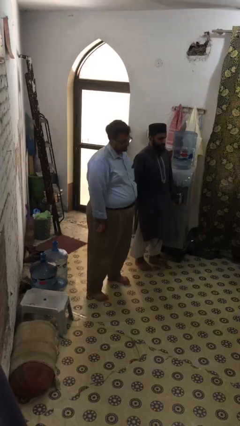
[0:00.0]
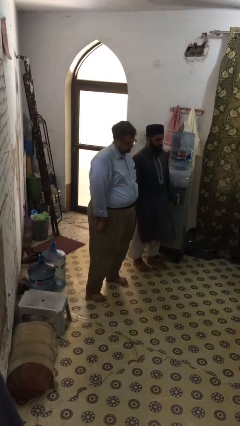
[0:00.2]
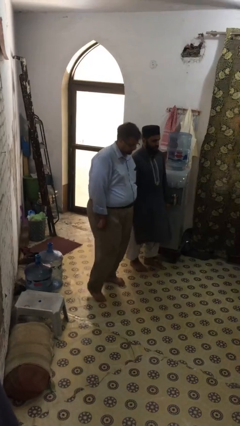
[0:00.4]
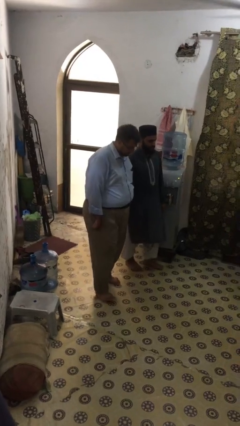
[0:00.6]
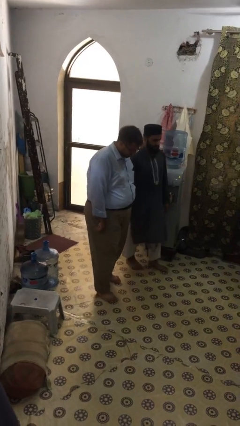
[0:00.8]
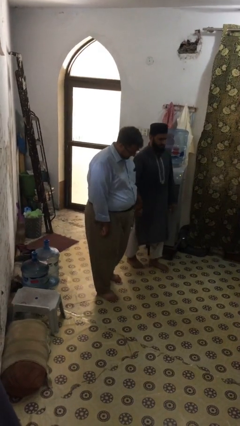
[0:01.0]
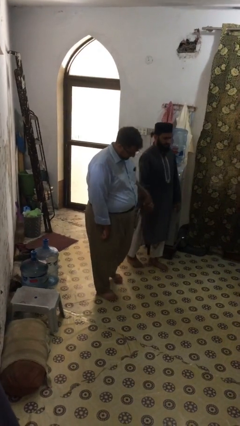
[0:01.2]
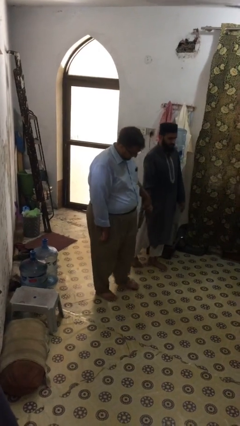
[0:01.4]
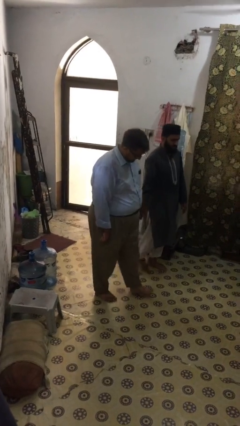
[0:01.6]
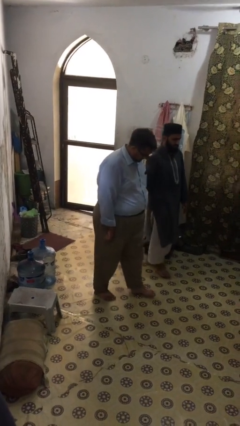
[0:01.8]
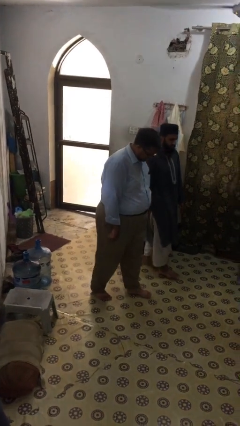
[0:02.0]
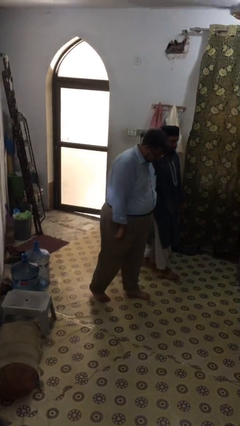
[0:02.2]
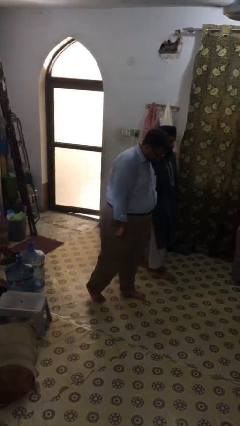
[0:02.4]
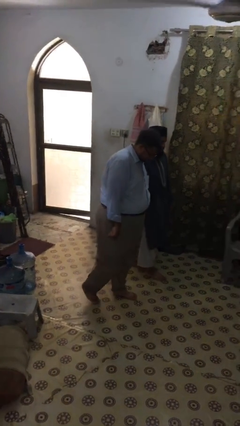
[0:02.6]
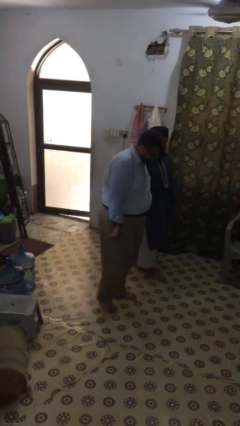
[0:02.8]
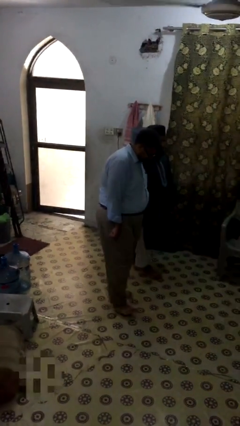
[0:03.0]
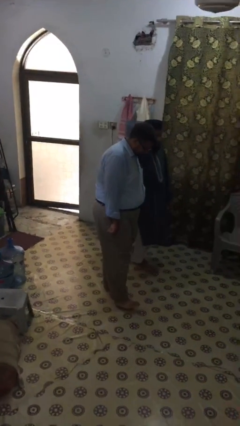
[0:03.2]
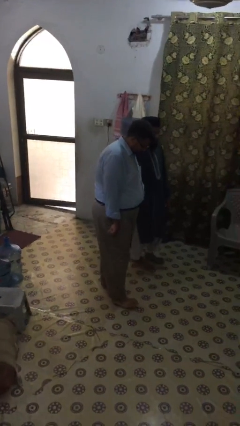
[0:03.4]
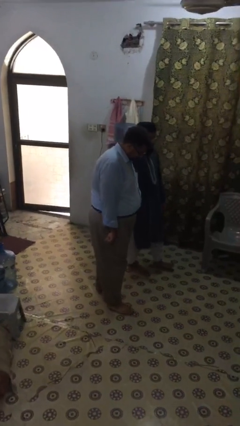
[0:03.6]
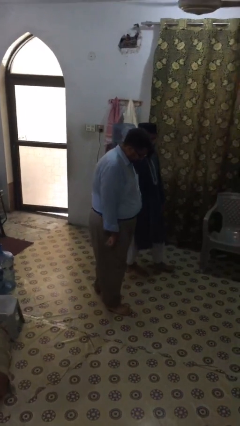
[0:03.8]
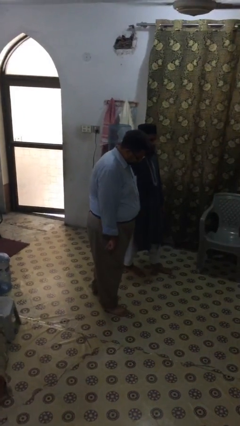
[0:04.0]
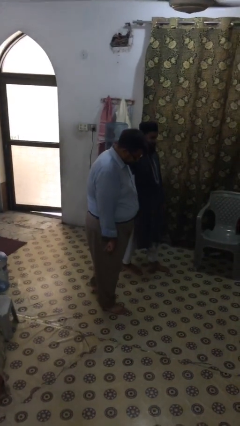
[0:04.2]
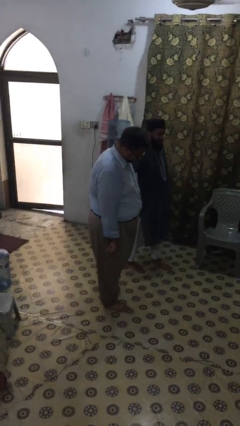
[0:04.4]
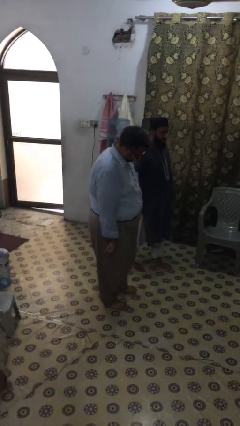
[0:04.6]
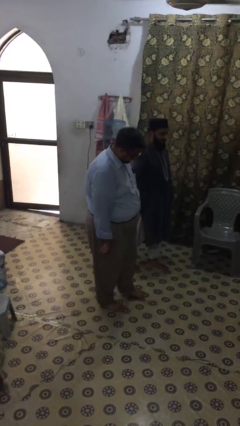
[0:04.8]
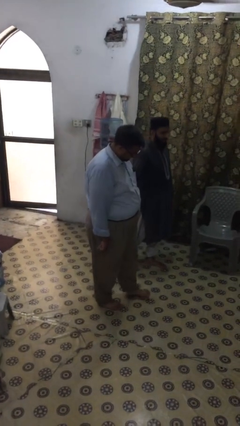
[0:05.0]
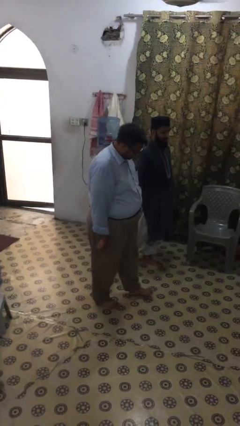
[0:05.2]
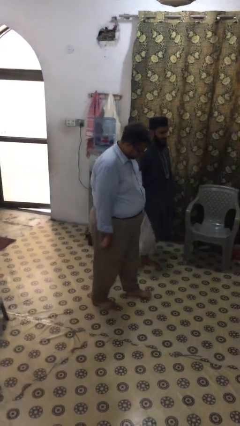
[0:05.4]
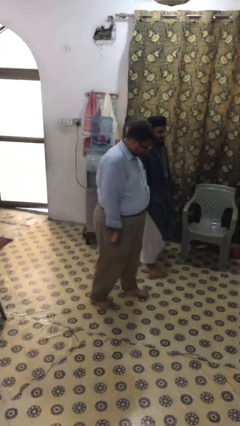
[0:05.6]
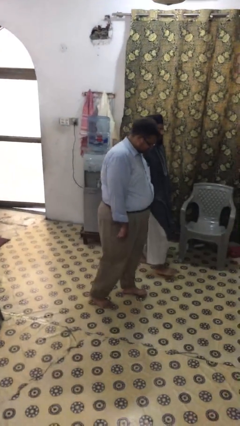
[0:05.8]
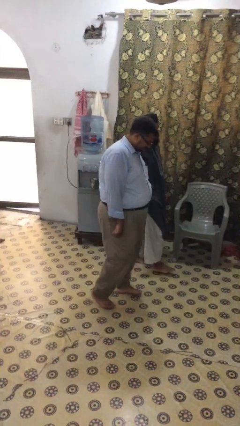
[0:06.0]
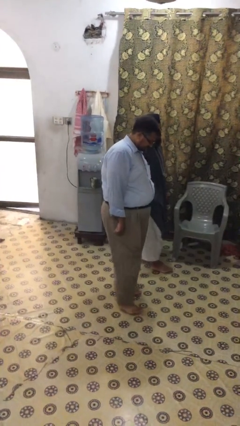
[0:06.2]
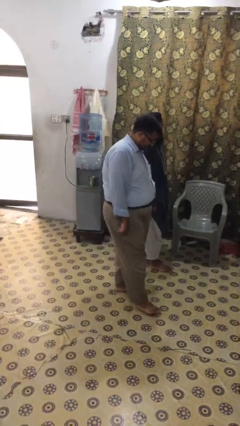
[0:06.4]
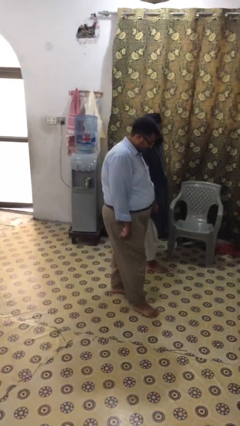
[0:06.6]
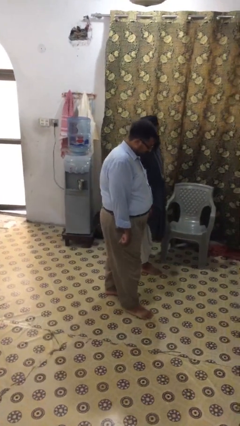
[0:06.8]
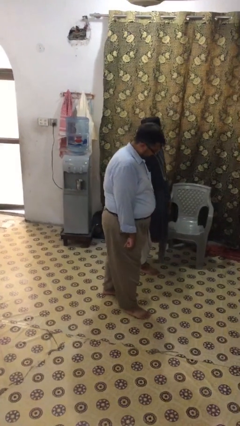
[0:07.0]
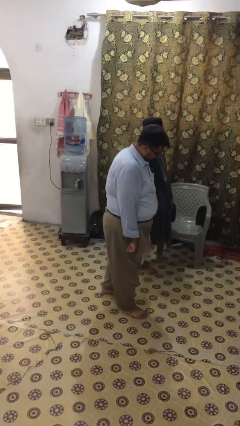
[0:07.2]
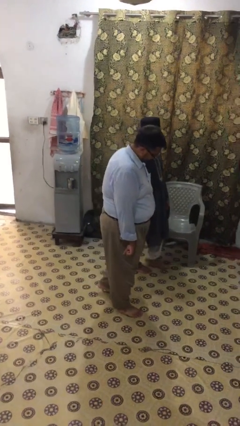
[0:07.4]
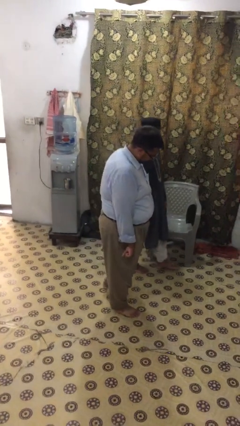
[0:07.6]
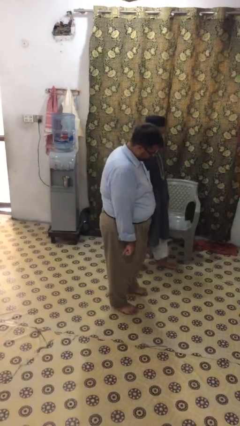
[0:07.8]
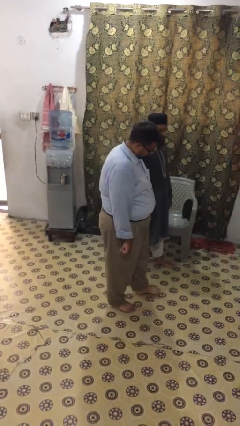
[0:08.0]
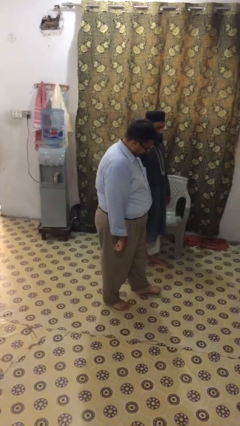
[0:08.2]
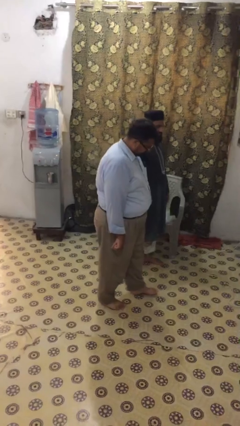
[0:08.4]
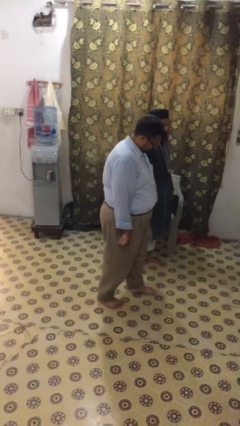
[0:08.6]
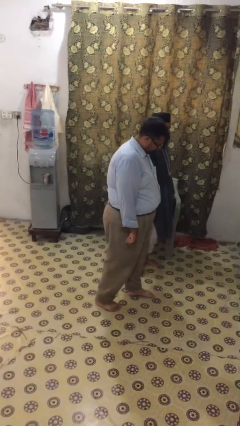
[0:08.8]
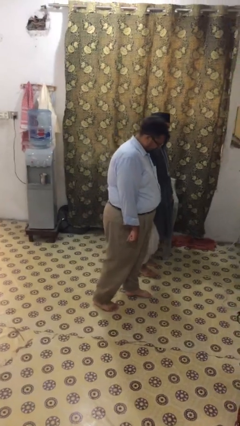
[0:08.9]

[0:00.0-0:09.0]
person holds hand

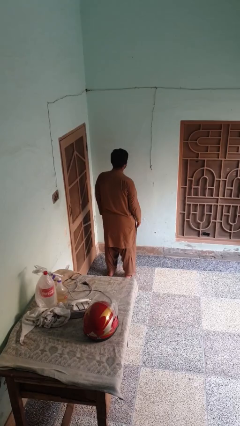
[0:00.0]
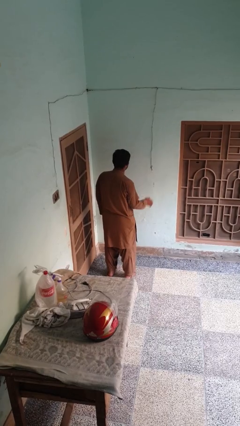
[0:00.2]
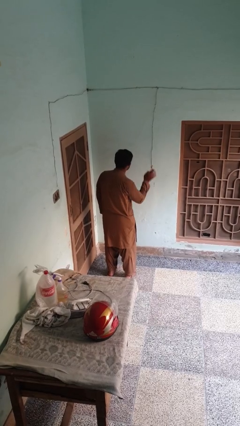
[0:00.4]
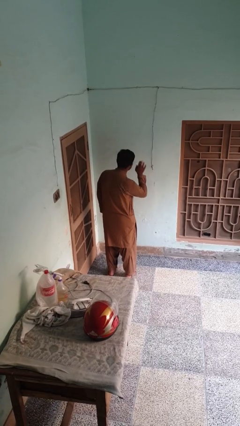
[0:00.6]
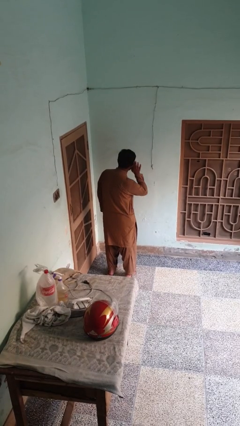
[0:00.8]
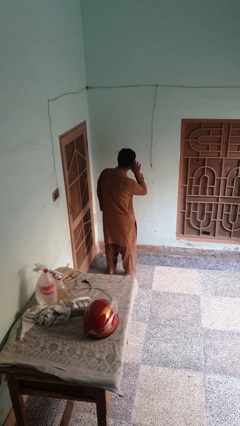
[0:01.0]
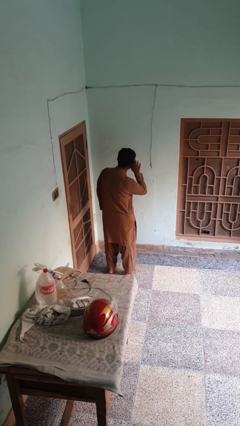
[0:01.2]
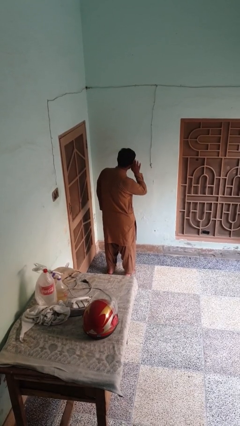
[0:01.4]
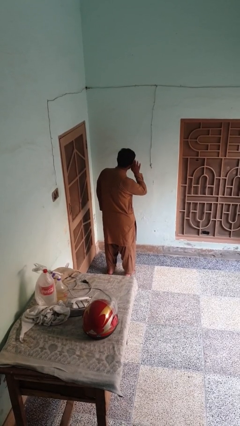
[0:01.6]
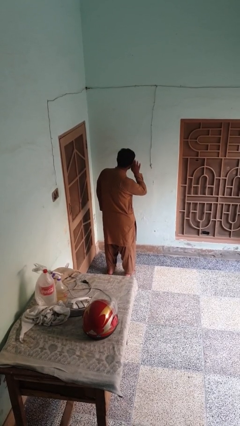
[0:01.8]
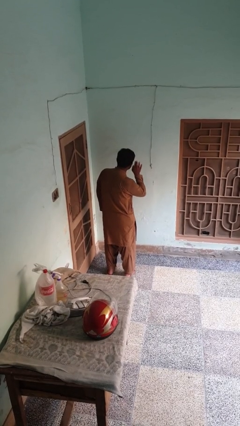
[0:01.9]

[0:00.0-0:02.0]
person gestures listen closely

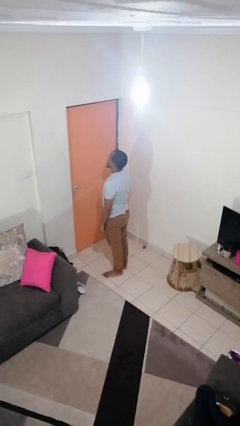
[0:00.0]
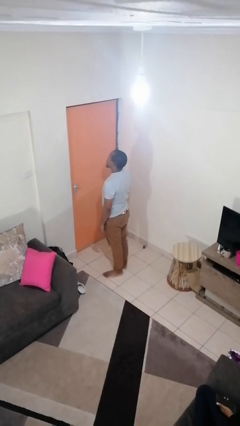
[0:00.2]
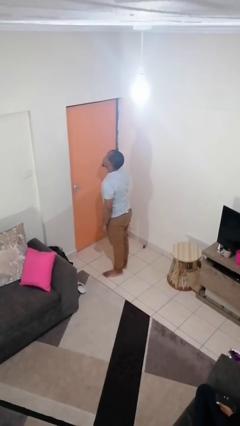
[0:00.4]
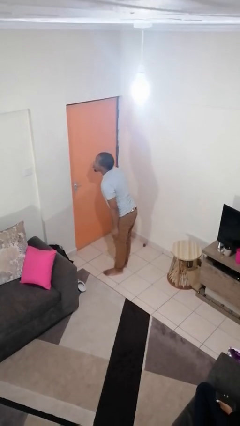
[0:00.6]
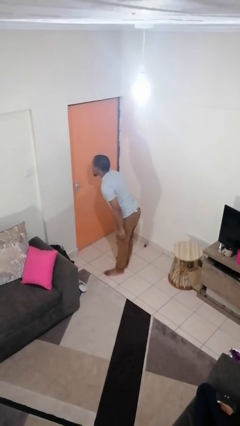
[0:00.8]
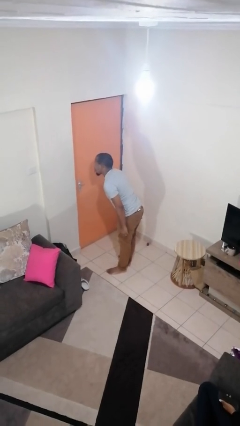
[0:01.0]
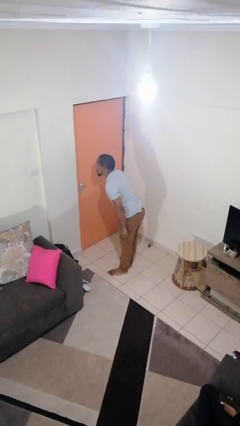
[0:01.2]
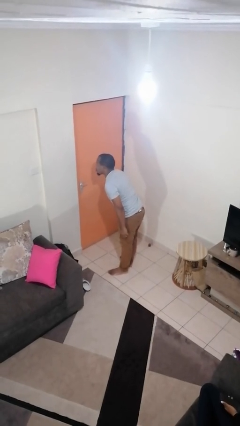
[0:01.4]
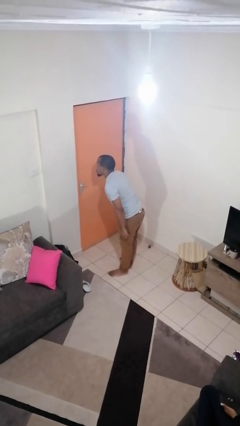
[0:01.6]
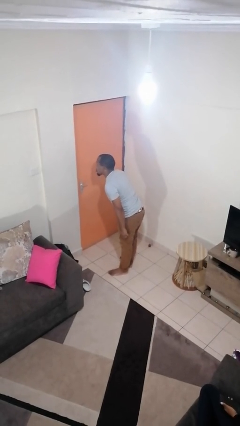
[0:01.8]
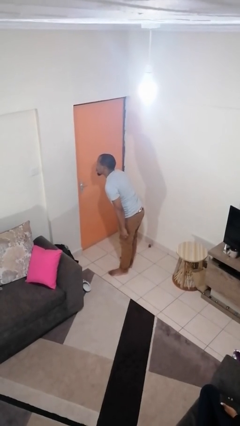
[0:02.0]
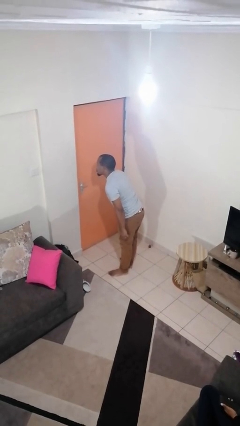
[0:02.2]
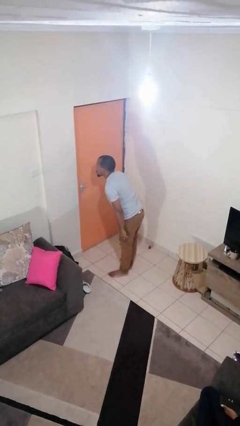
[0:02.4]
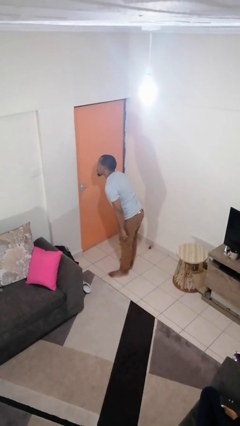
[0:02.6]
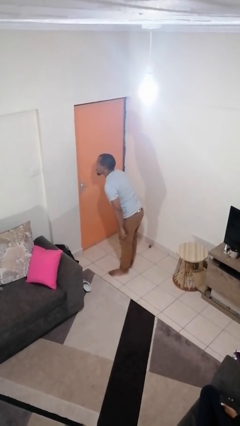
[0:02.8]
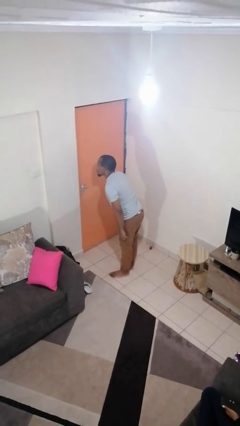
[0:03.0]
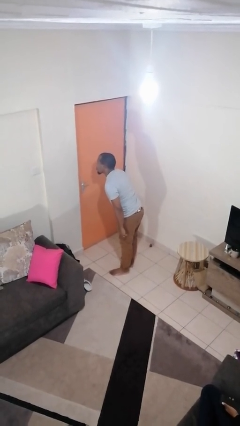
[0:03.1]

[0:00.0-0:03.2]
person sticks out tongue

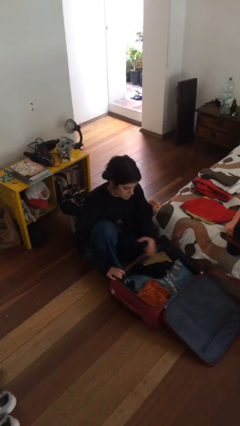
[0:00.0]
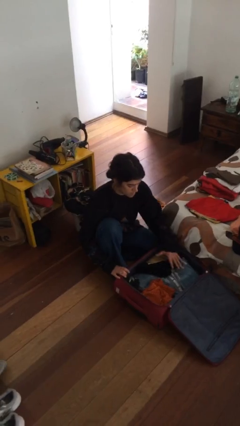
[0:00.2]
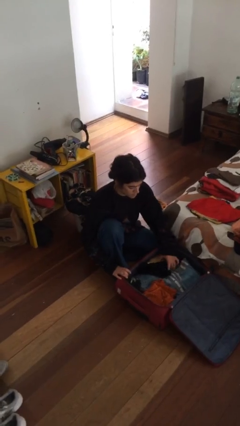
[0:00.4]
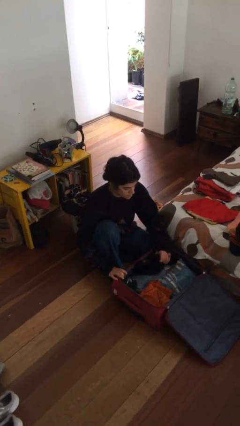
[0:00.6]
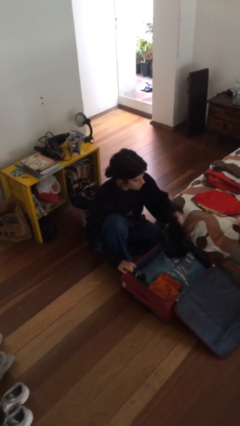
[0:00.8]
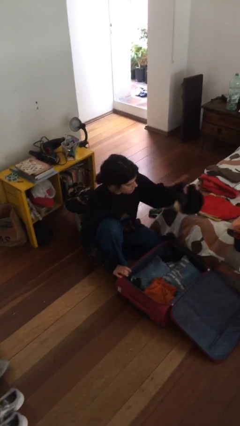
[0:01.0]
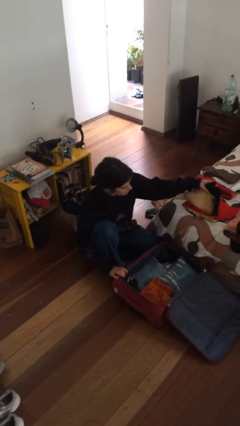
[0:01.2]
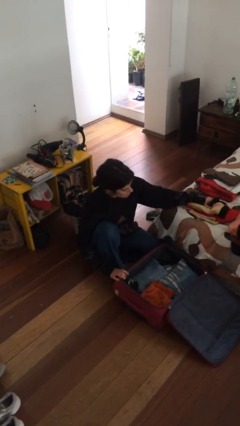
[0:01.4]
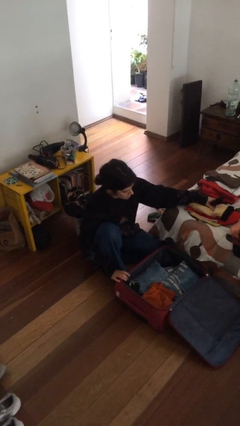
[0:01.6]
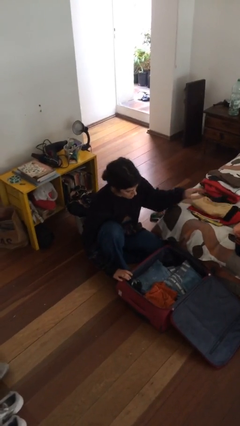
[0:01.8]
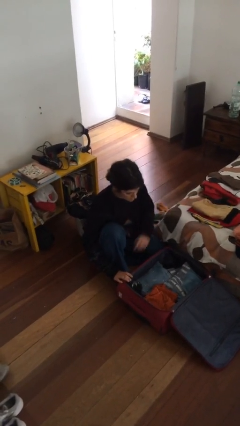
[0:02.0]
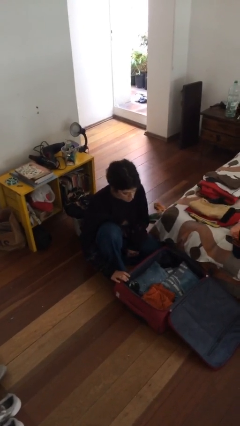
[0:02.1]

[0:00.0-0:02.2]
person unloads clothes from suitcase

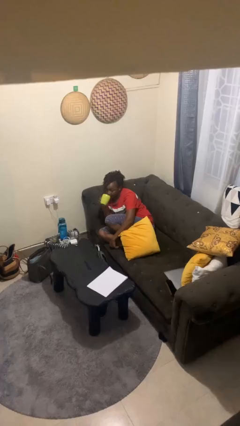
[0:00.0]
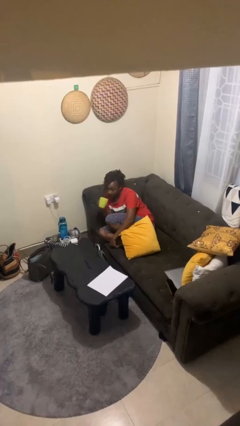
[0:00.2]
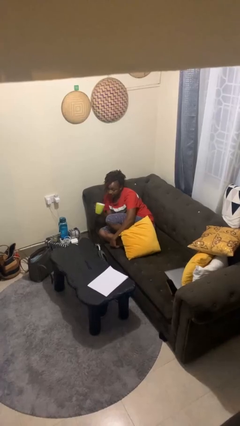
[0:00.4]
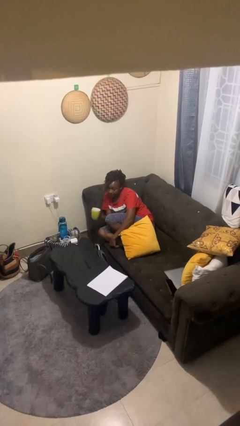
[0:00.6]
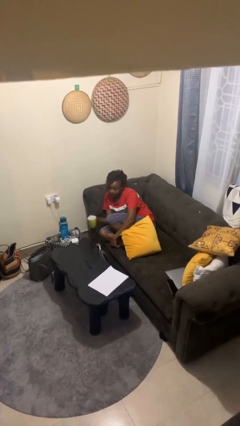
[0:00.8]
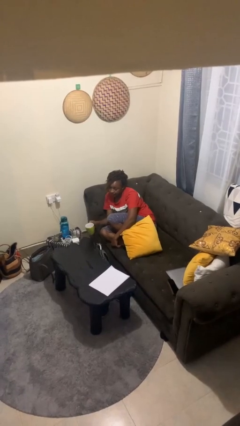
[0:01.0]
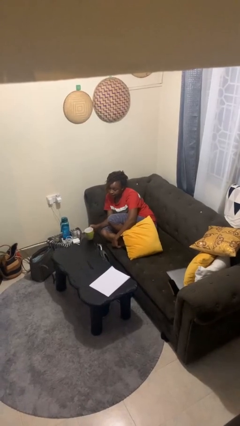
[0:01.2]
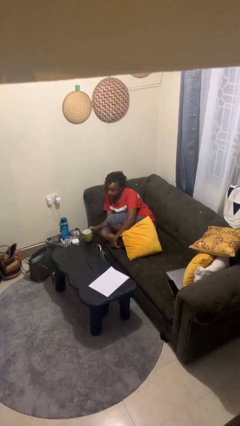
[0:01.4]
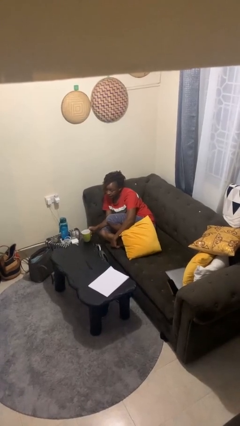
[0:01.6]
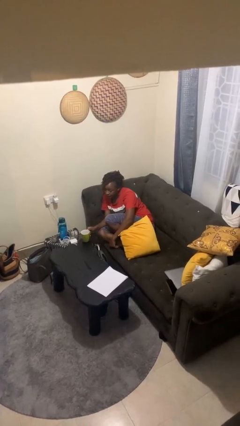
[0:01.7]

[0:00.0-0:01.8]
person puts down object on table
